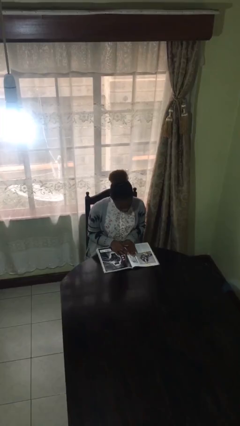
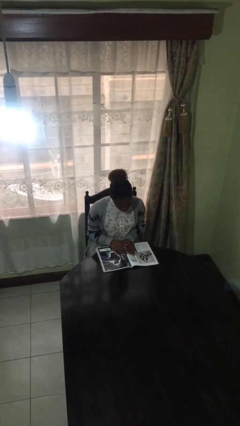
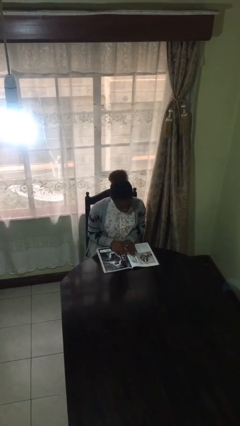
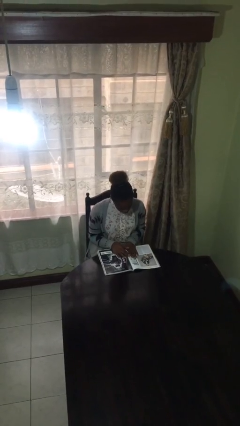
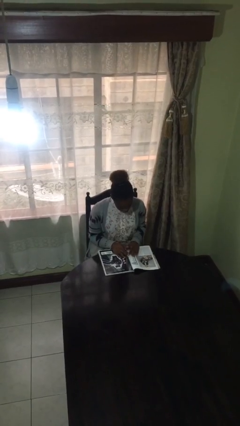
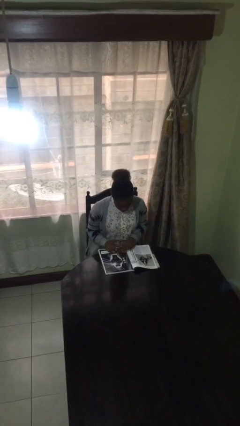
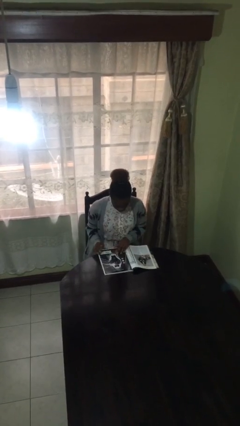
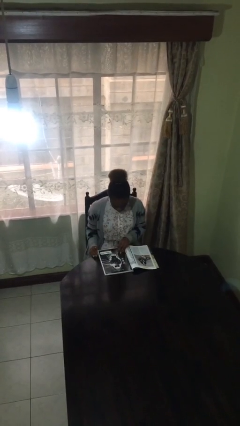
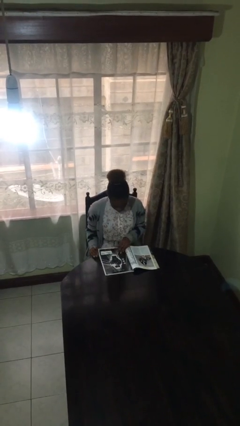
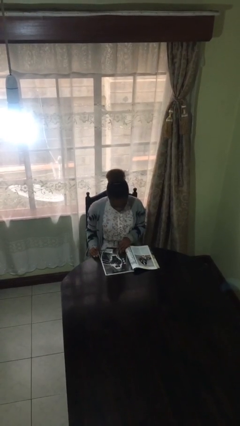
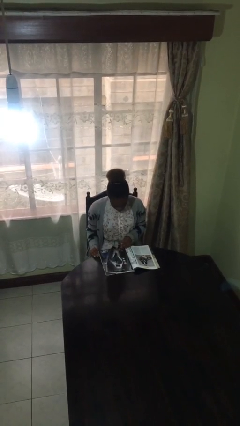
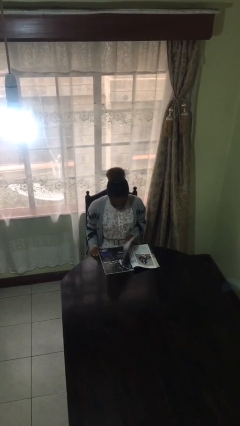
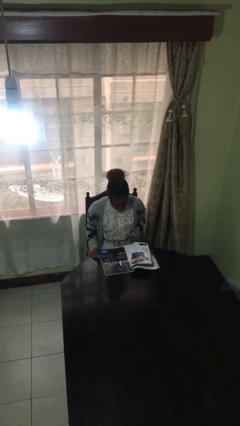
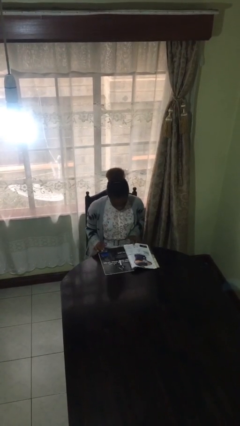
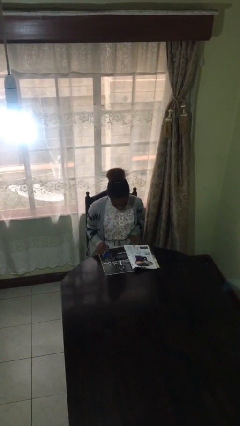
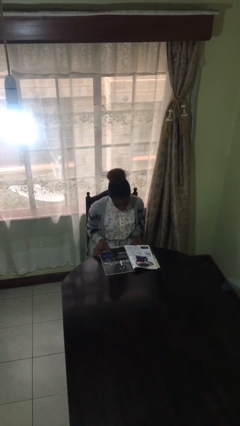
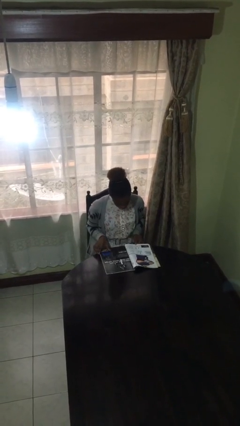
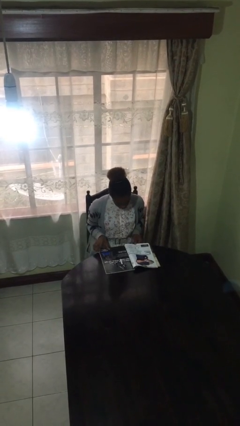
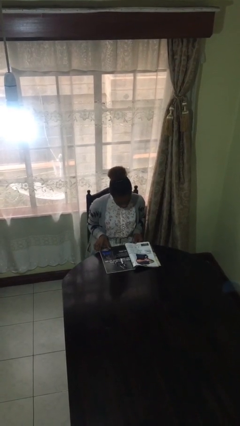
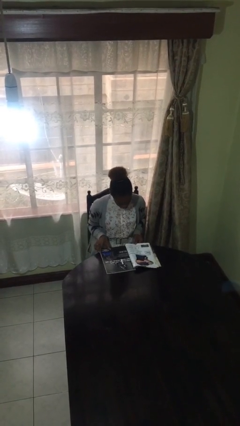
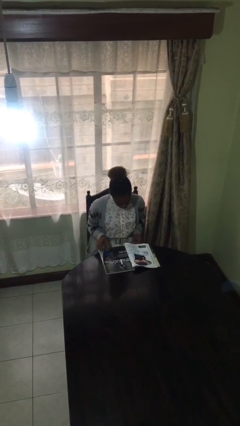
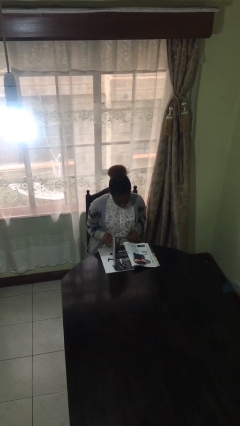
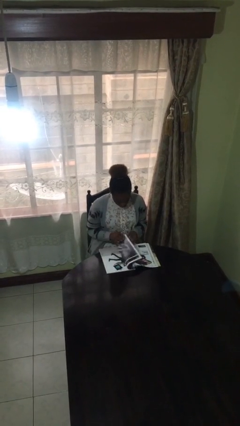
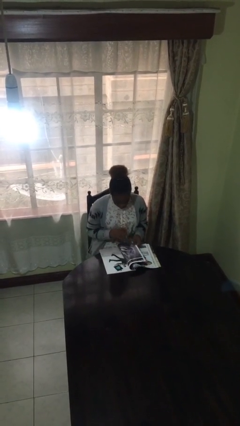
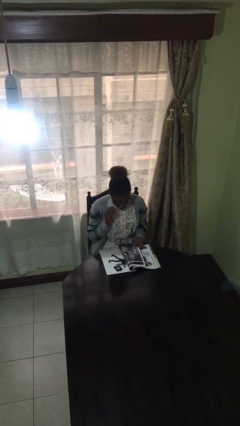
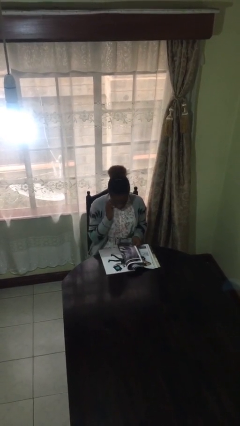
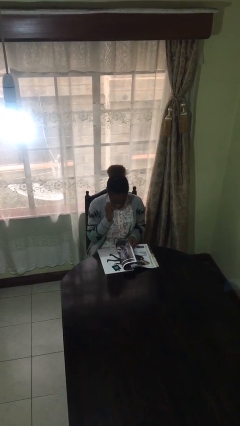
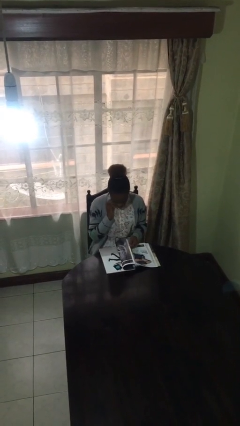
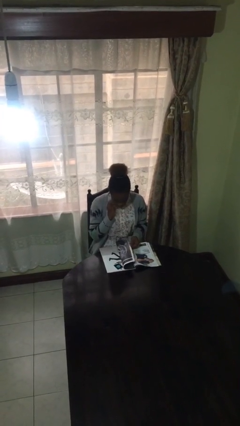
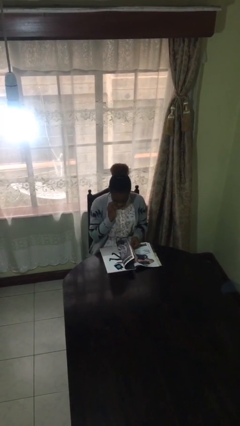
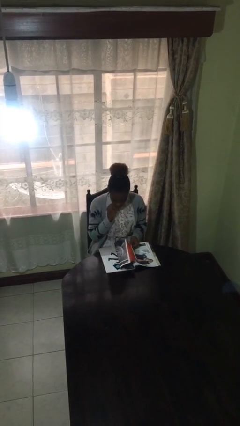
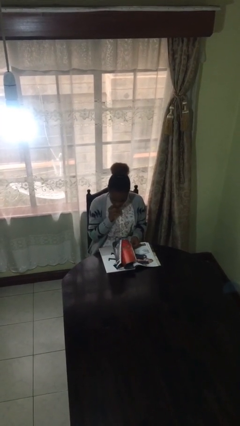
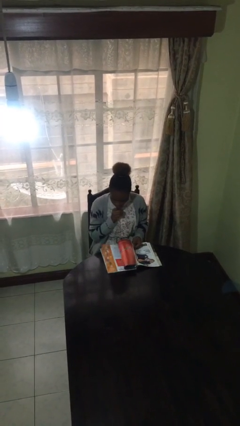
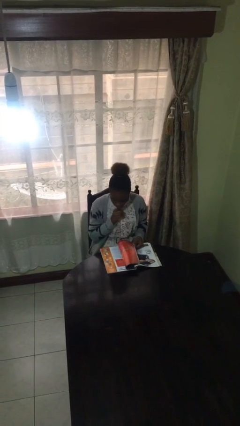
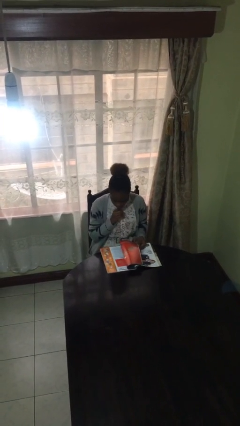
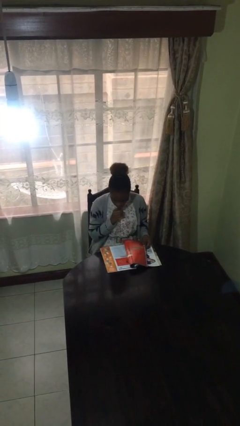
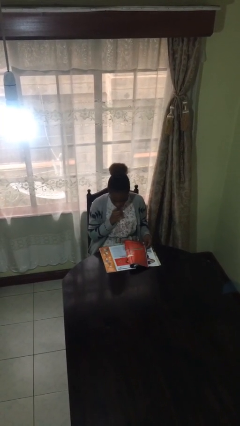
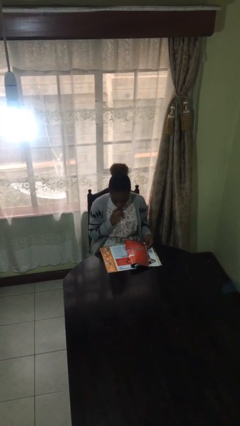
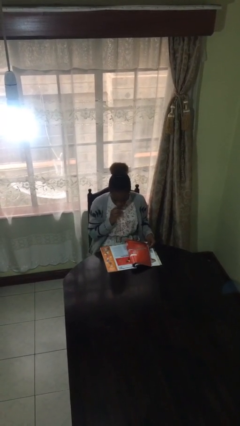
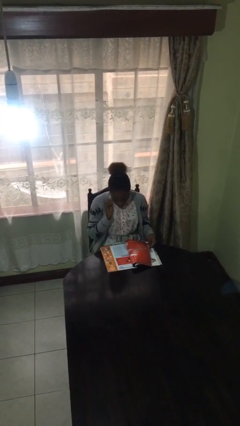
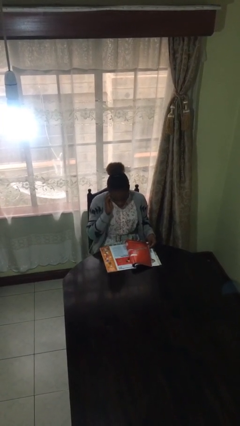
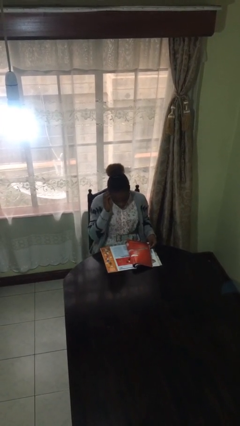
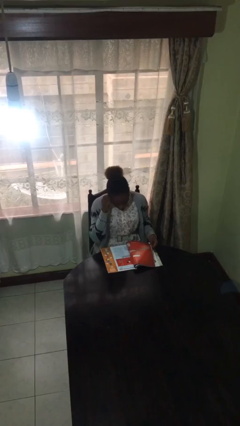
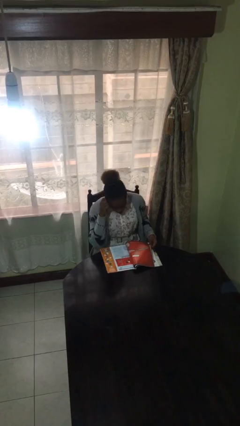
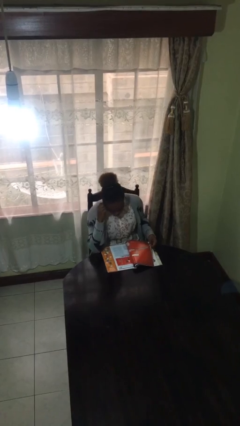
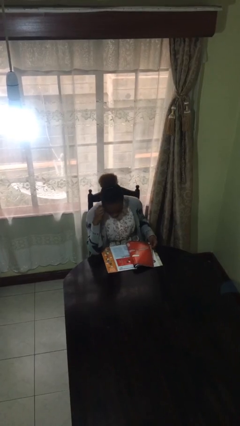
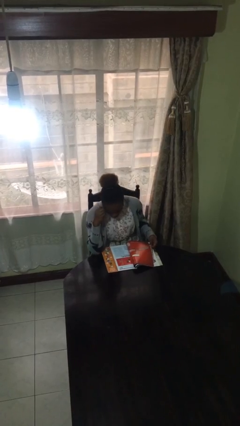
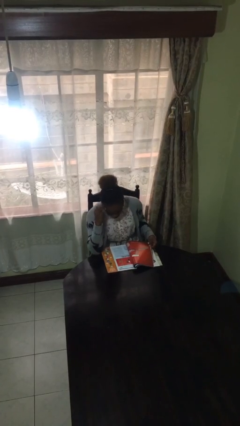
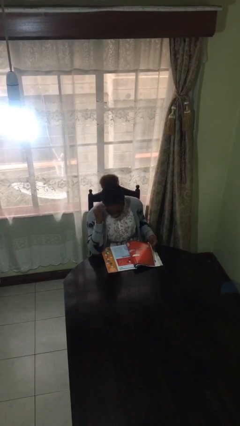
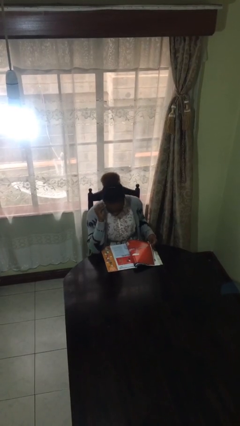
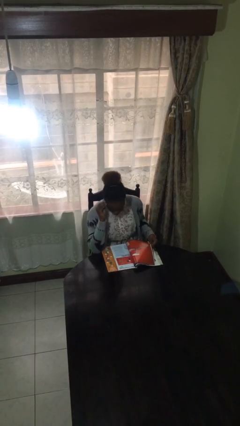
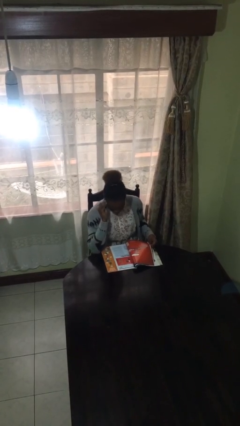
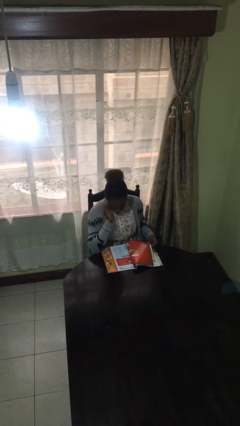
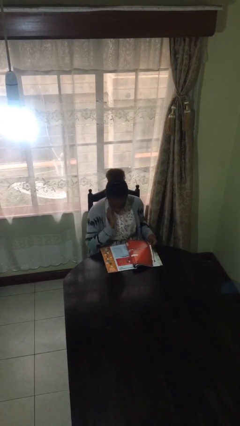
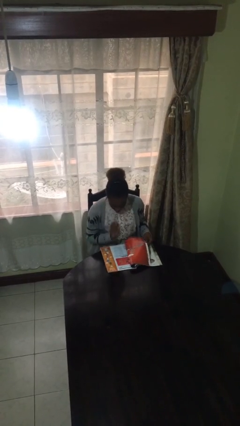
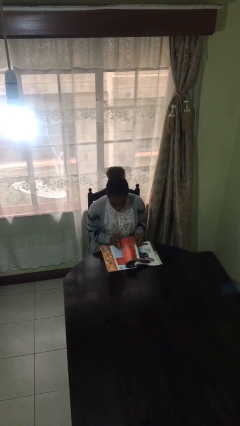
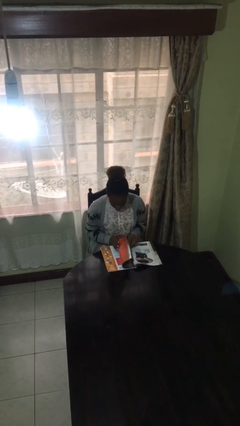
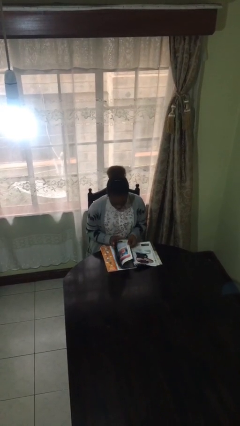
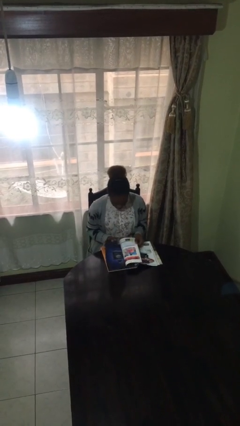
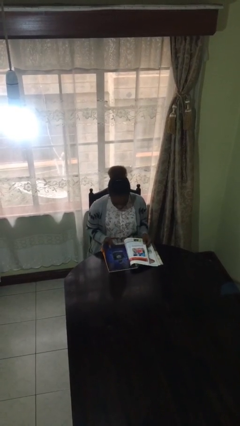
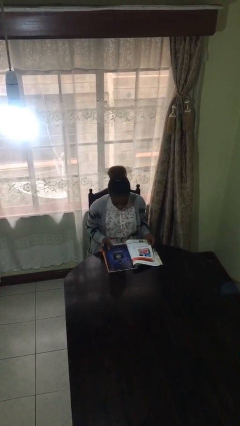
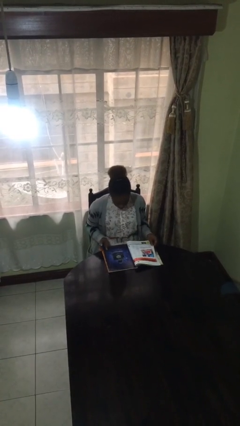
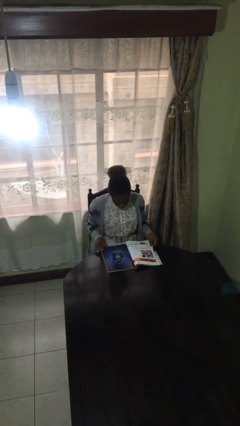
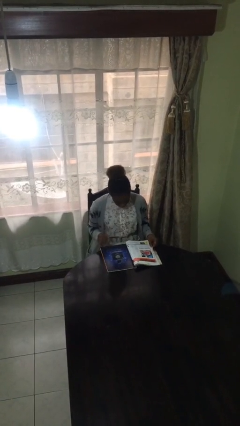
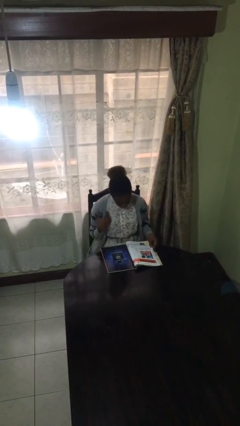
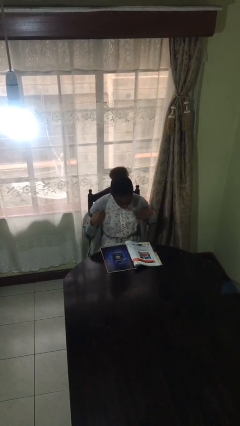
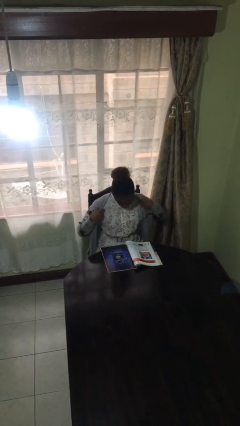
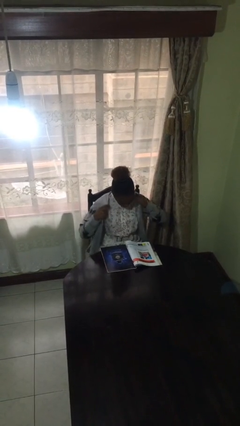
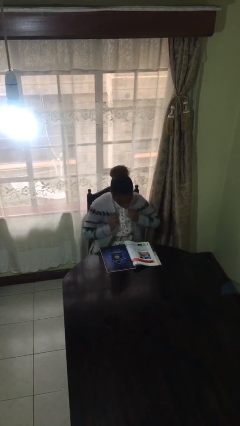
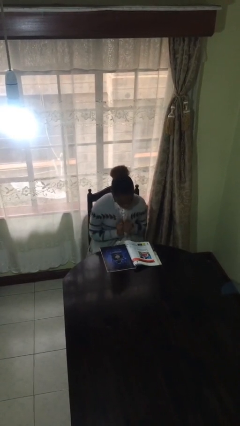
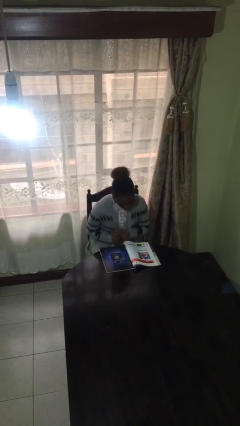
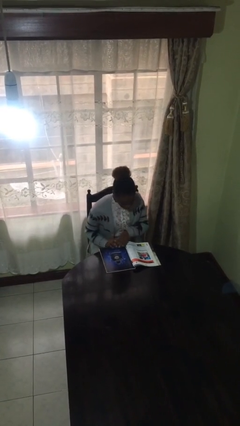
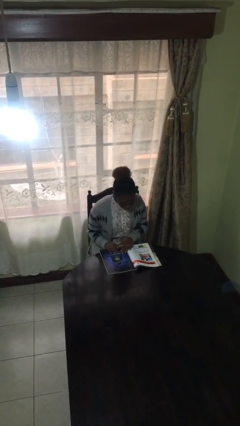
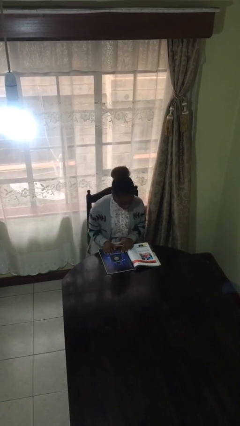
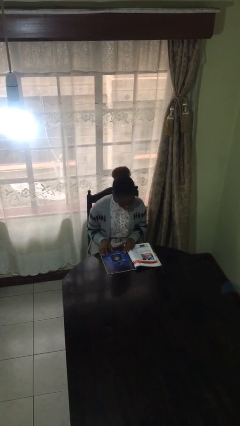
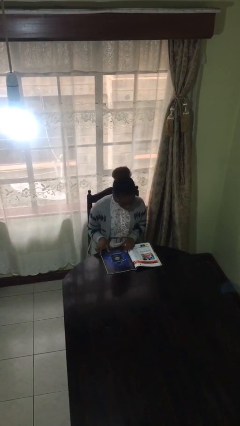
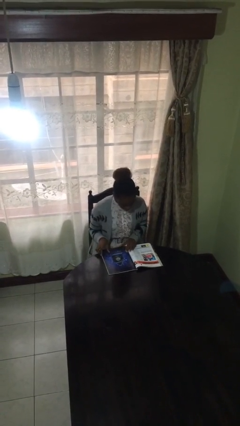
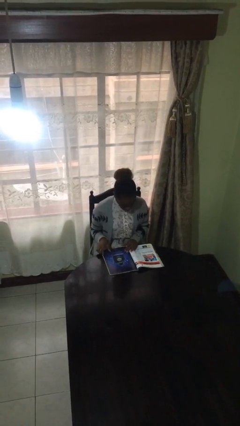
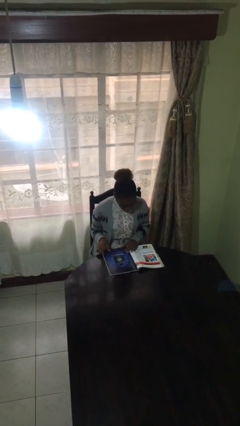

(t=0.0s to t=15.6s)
person reads document

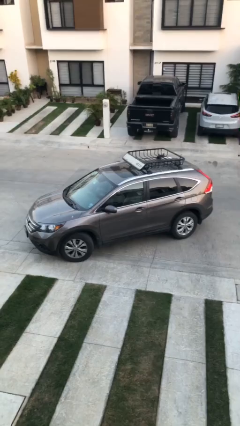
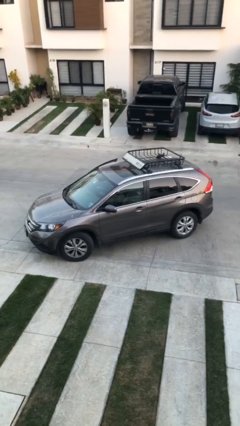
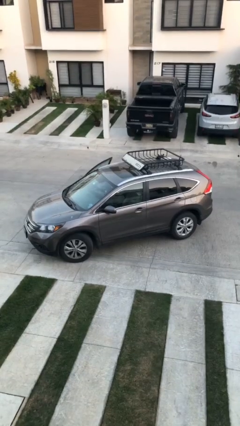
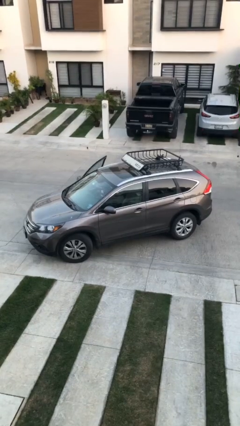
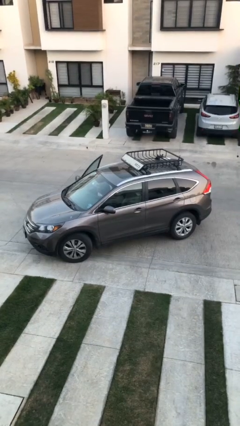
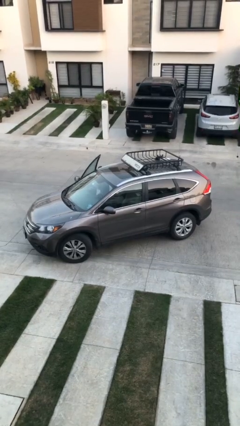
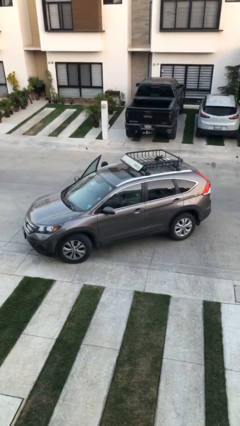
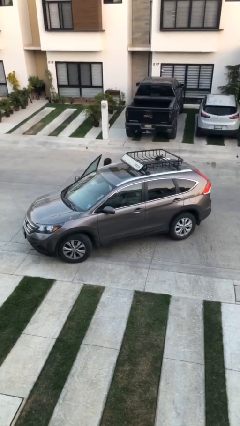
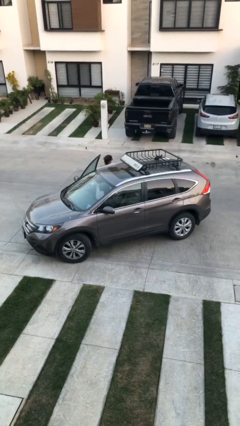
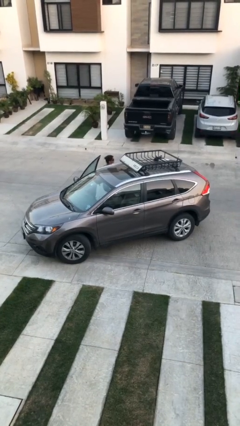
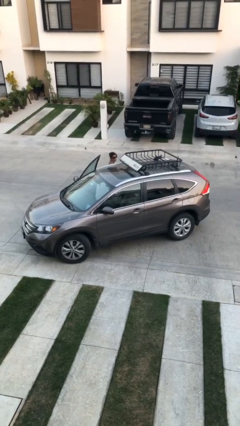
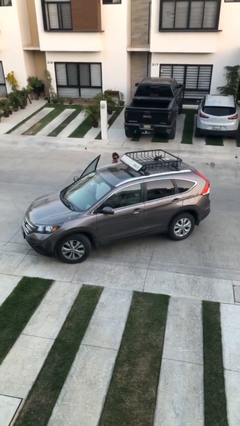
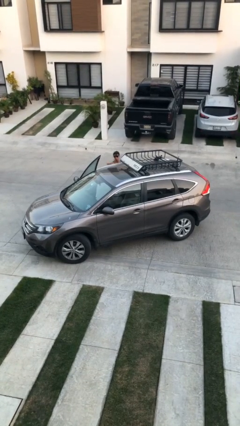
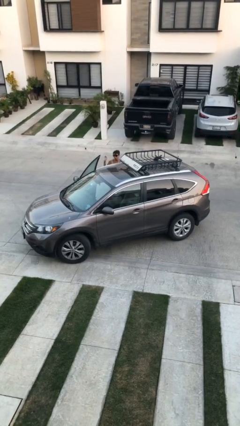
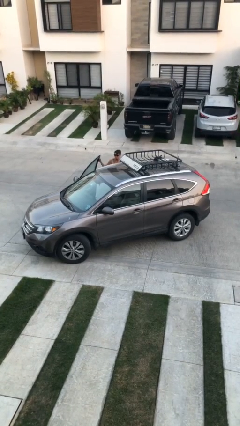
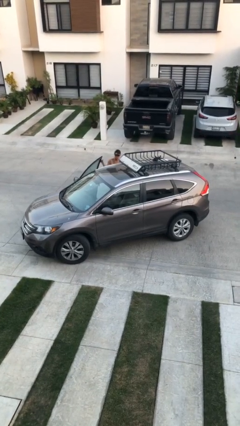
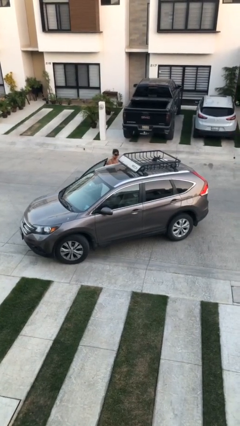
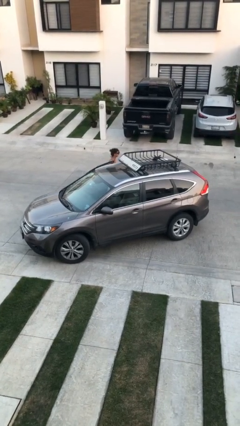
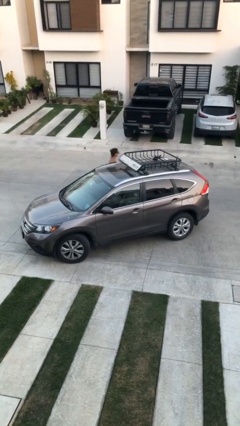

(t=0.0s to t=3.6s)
car drops off person
